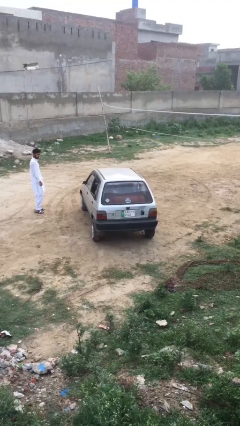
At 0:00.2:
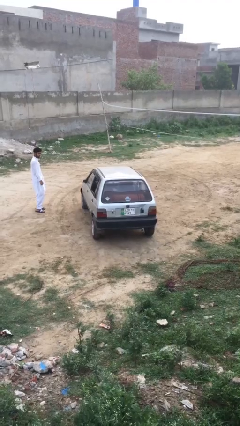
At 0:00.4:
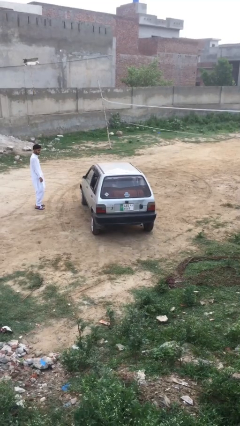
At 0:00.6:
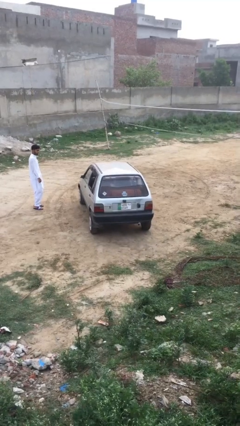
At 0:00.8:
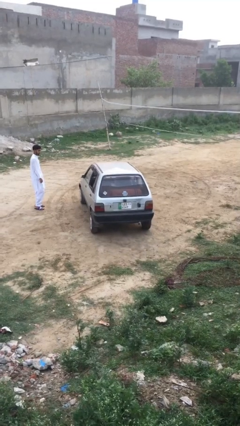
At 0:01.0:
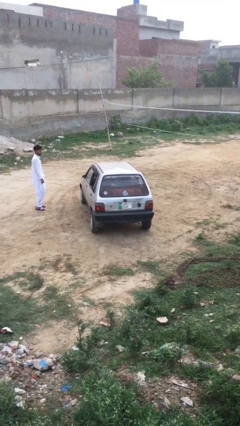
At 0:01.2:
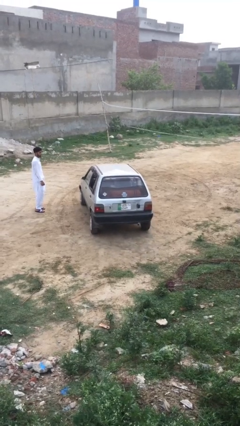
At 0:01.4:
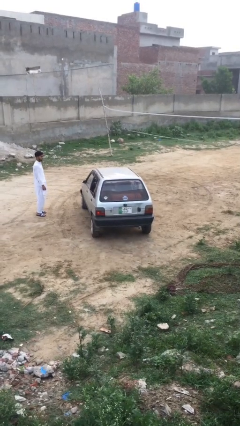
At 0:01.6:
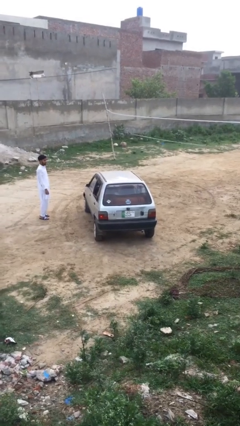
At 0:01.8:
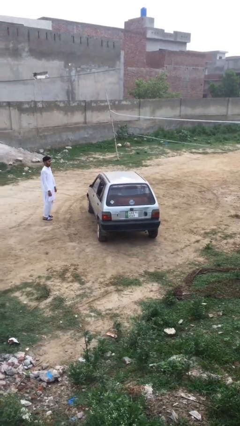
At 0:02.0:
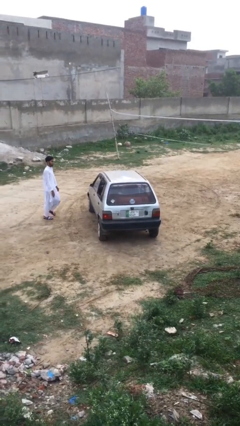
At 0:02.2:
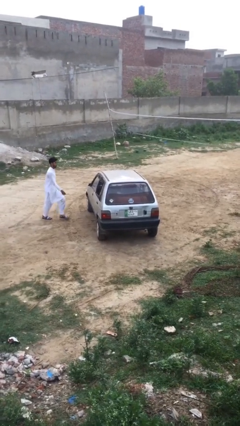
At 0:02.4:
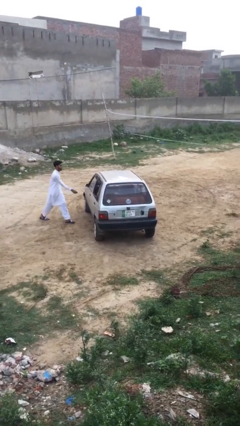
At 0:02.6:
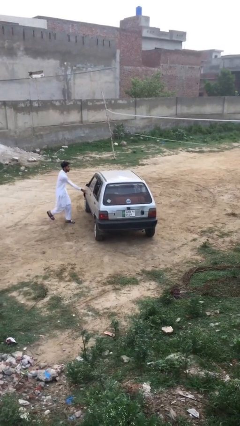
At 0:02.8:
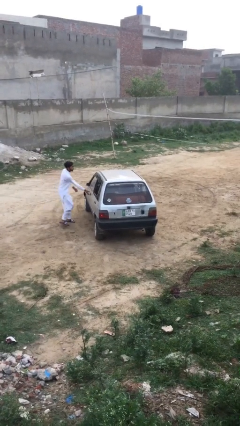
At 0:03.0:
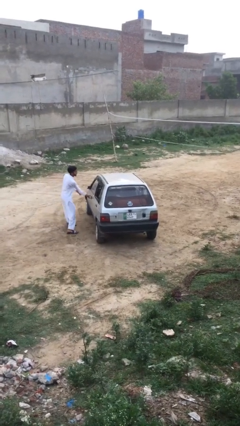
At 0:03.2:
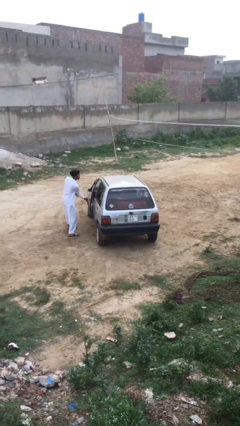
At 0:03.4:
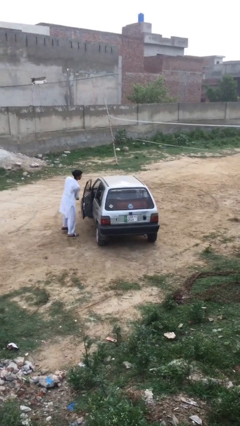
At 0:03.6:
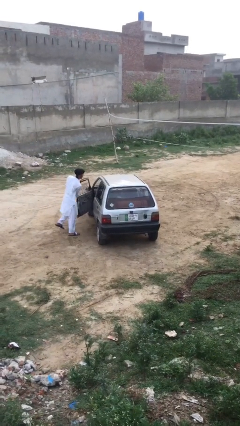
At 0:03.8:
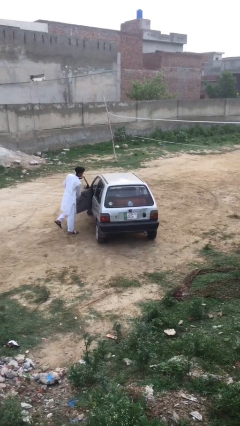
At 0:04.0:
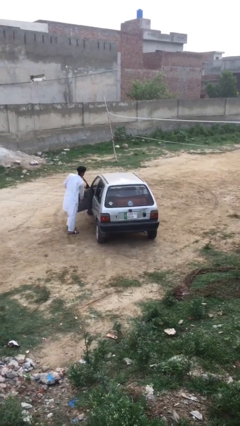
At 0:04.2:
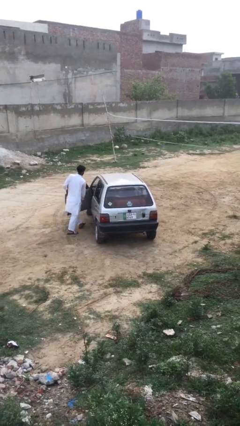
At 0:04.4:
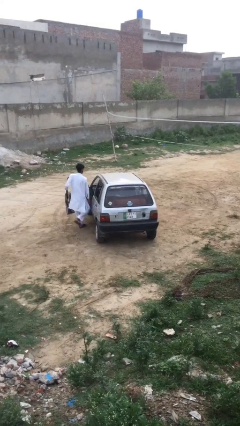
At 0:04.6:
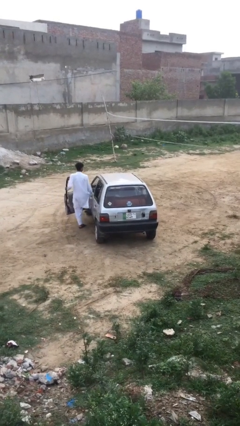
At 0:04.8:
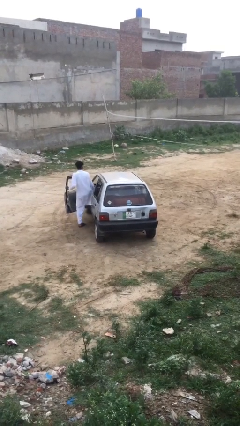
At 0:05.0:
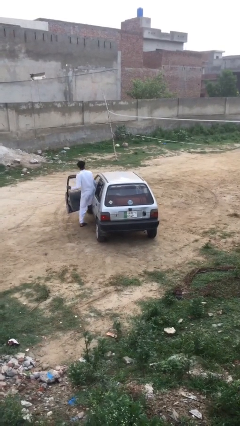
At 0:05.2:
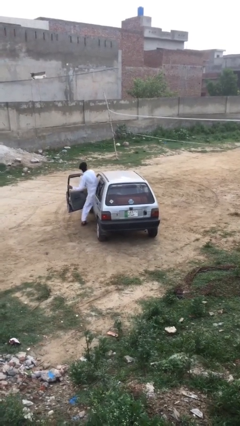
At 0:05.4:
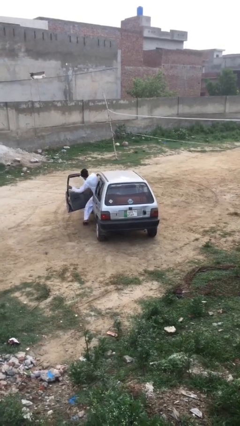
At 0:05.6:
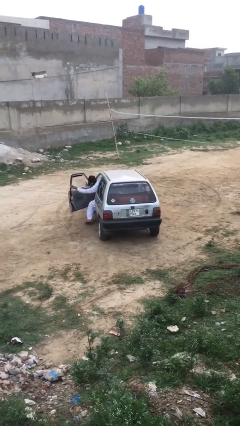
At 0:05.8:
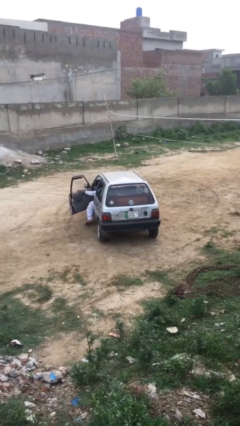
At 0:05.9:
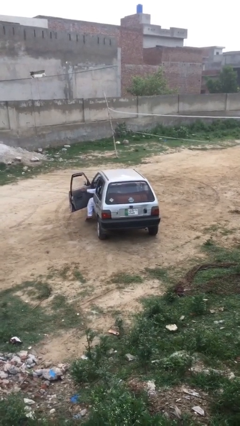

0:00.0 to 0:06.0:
car picks up person

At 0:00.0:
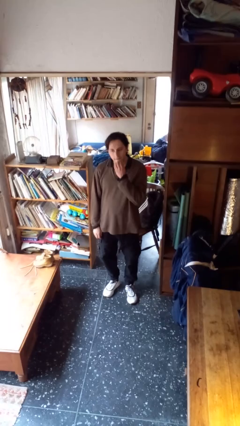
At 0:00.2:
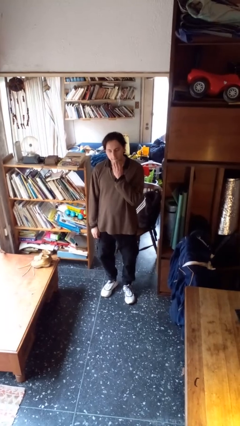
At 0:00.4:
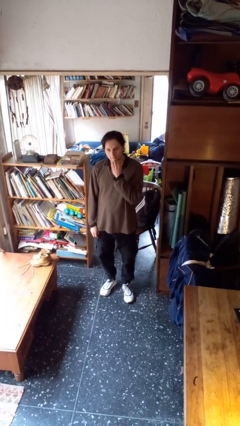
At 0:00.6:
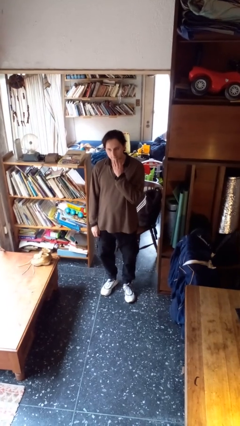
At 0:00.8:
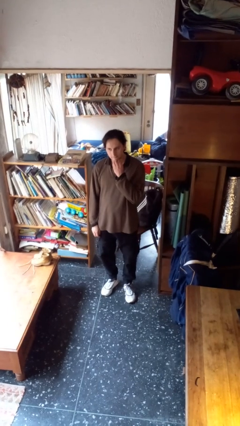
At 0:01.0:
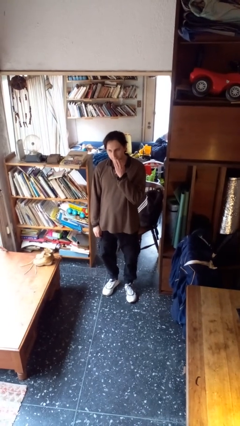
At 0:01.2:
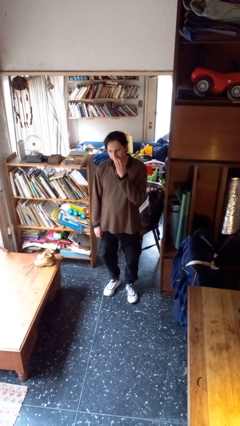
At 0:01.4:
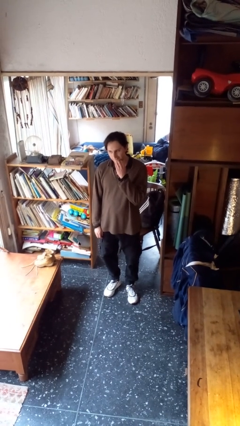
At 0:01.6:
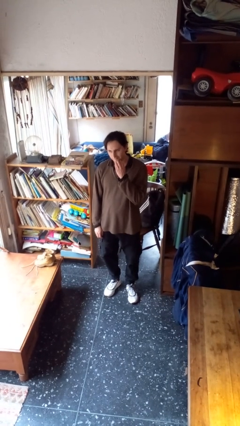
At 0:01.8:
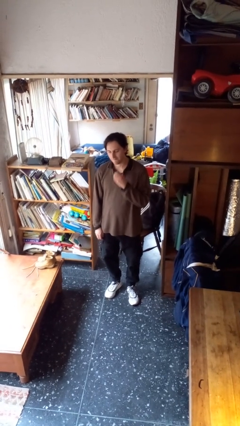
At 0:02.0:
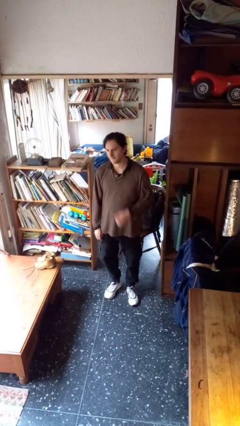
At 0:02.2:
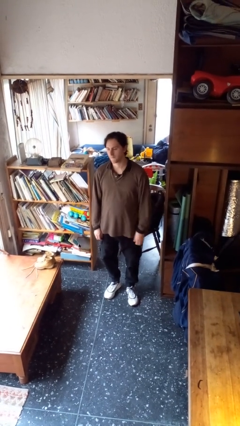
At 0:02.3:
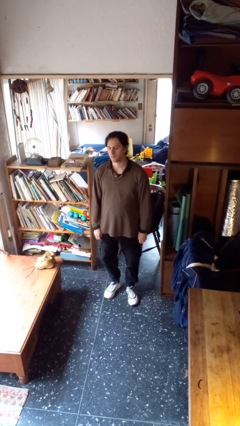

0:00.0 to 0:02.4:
person scratches face

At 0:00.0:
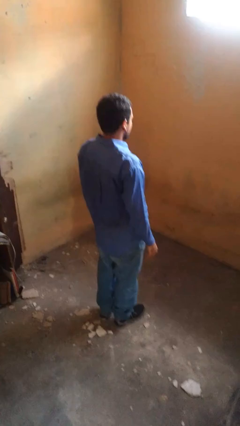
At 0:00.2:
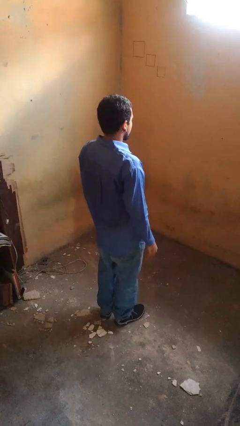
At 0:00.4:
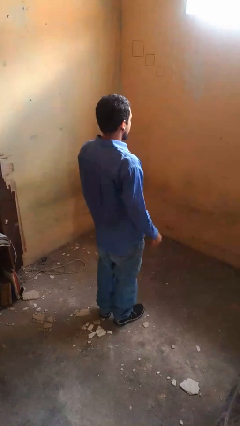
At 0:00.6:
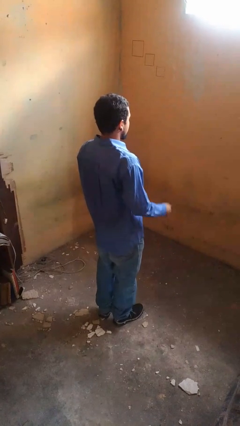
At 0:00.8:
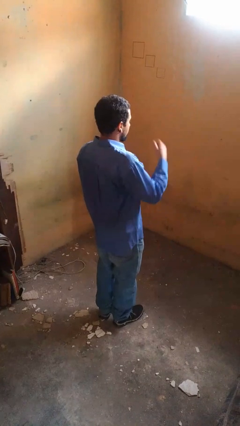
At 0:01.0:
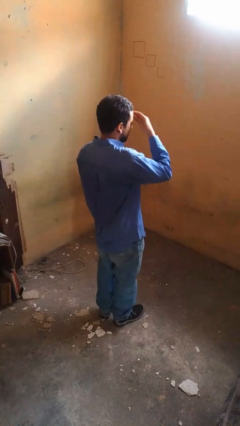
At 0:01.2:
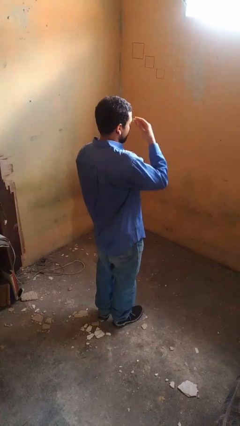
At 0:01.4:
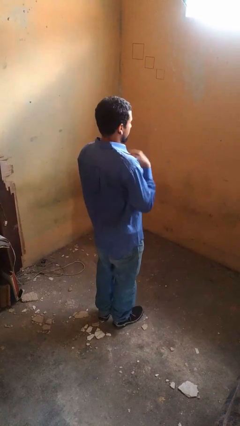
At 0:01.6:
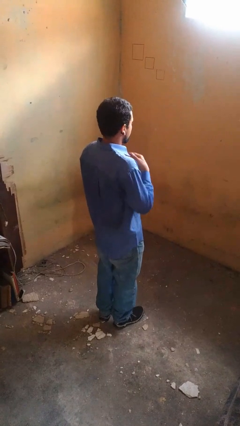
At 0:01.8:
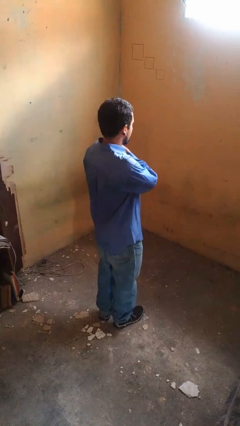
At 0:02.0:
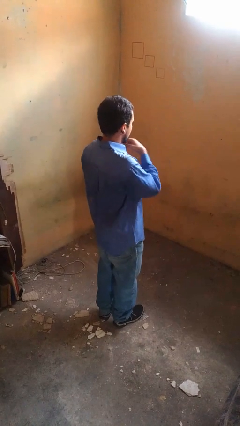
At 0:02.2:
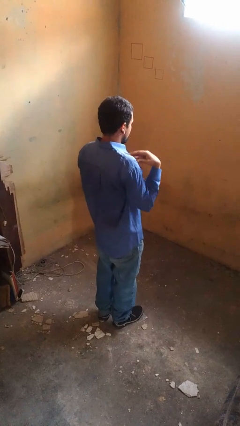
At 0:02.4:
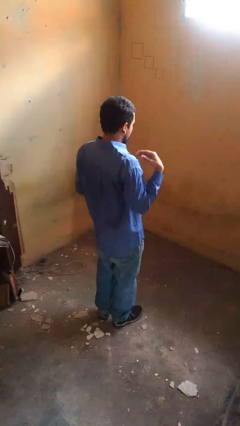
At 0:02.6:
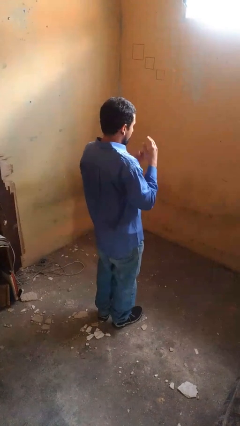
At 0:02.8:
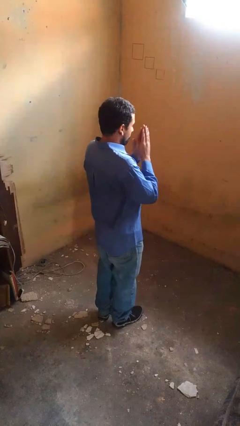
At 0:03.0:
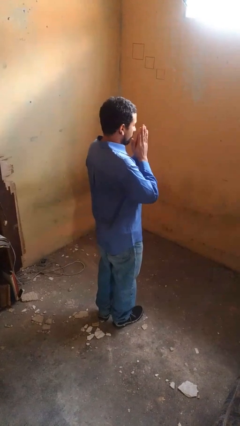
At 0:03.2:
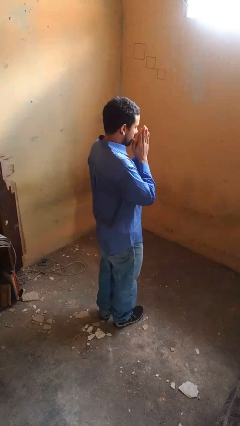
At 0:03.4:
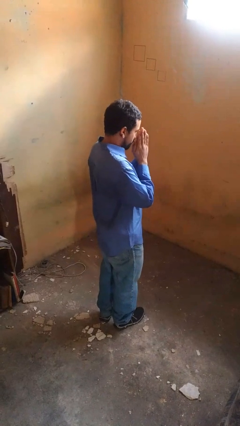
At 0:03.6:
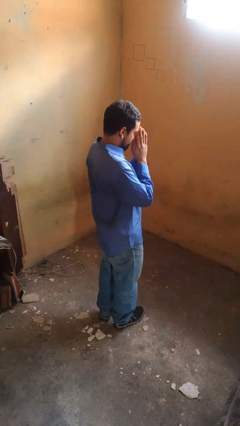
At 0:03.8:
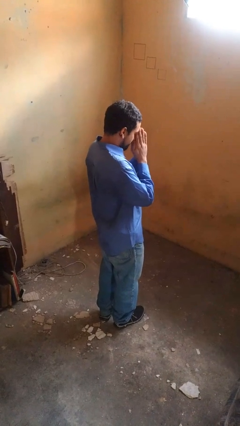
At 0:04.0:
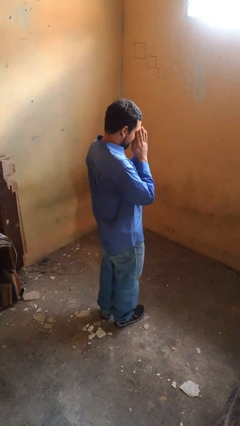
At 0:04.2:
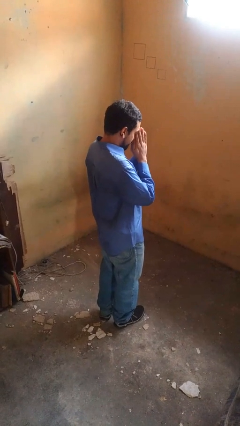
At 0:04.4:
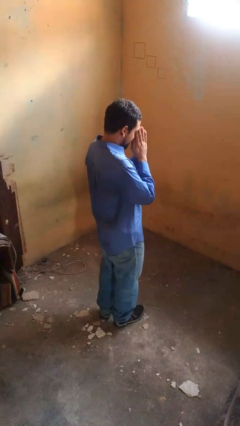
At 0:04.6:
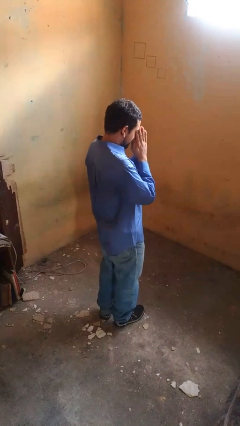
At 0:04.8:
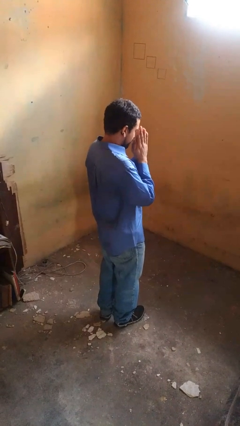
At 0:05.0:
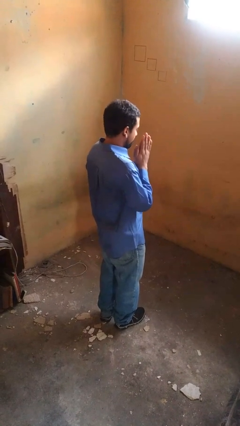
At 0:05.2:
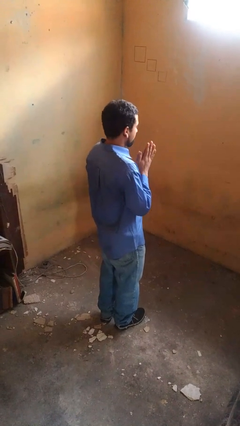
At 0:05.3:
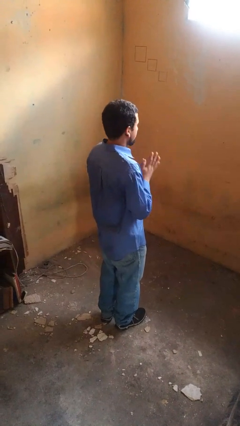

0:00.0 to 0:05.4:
person prays

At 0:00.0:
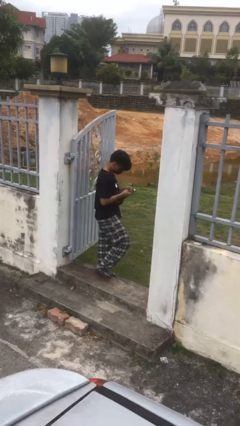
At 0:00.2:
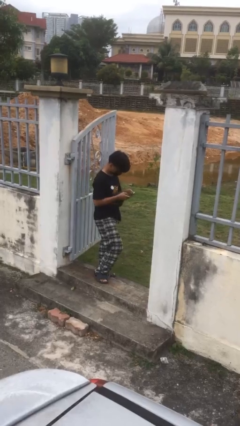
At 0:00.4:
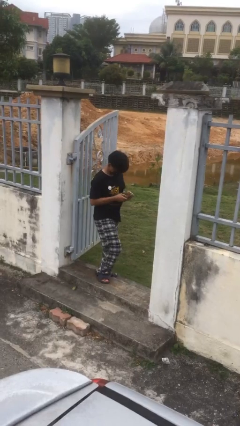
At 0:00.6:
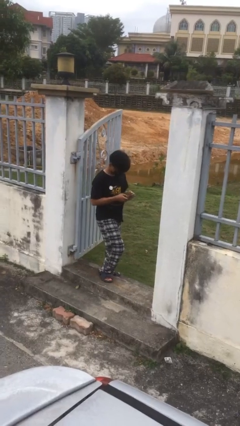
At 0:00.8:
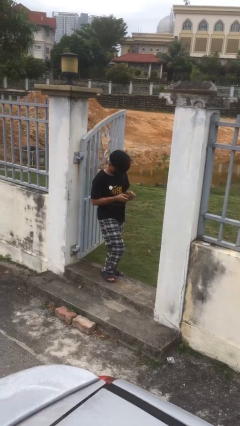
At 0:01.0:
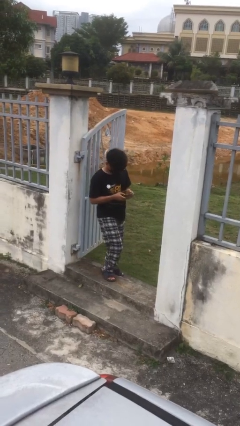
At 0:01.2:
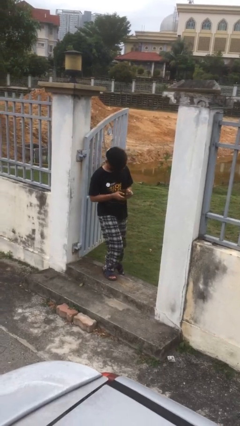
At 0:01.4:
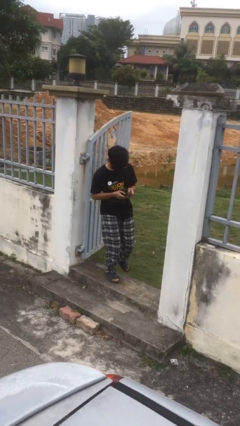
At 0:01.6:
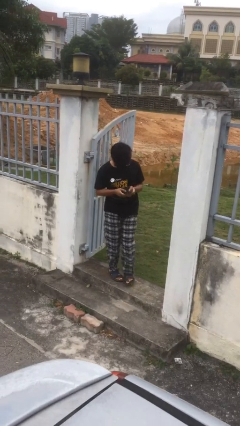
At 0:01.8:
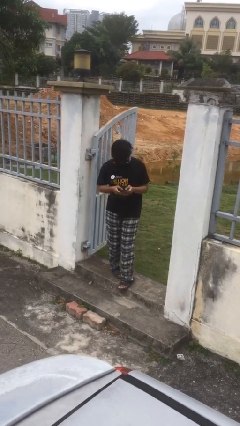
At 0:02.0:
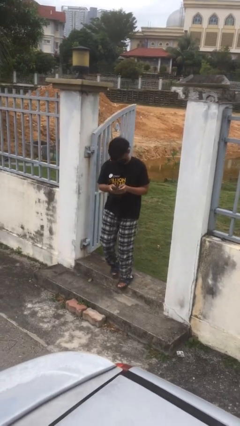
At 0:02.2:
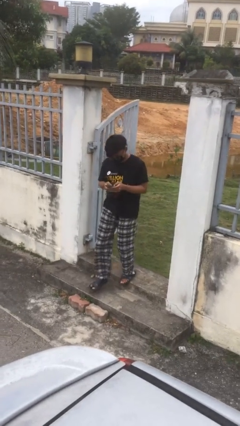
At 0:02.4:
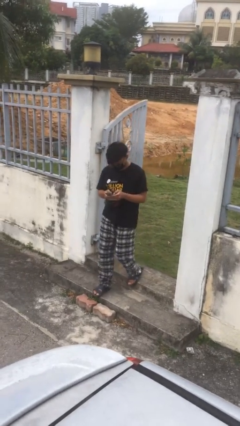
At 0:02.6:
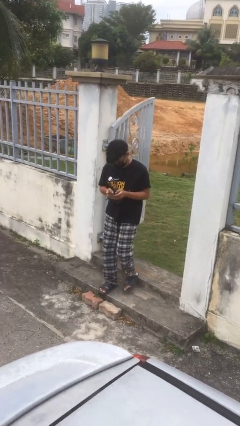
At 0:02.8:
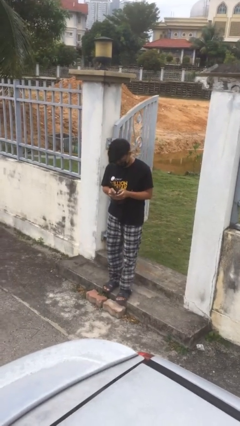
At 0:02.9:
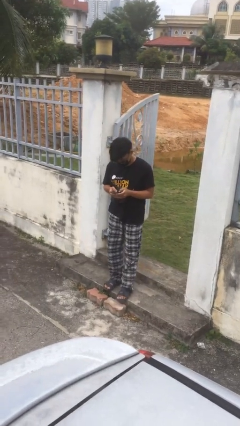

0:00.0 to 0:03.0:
person enters scene through structure

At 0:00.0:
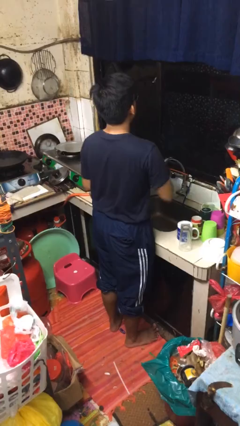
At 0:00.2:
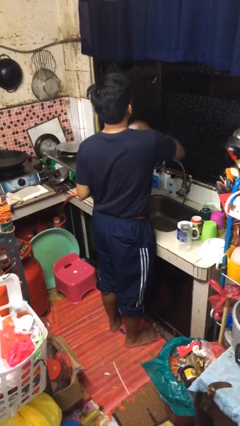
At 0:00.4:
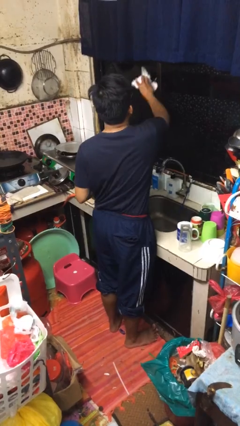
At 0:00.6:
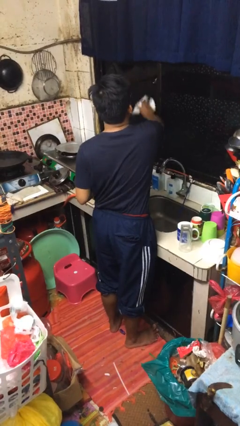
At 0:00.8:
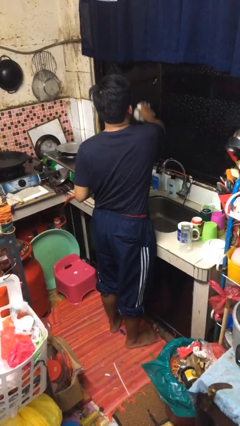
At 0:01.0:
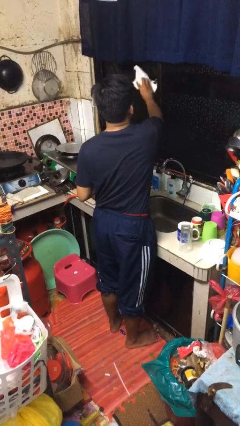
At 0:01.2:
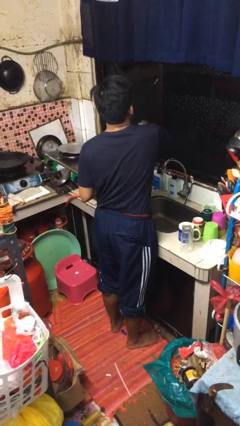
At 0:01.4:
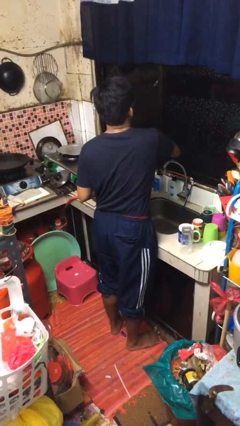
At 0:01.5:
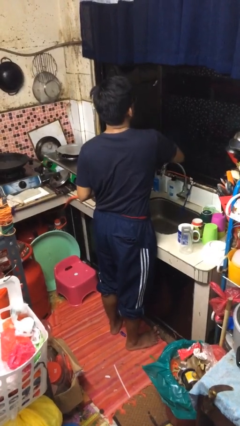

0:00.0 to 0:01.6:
person washes window
